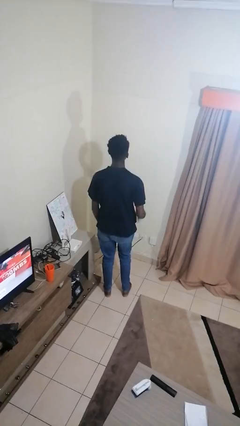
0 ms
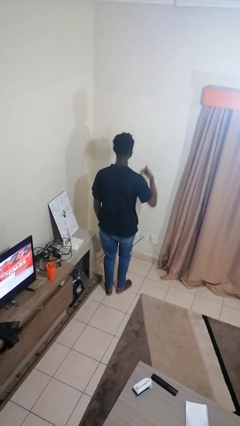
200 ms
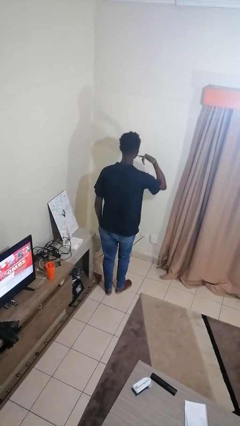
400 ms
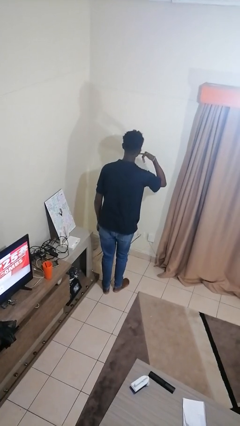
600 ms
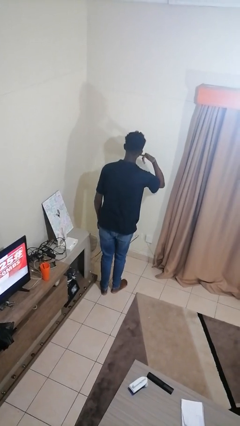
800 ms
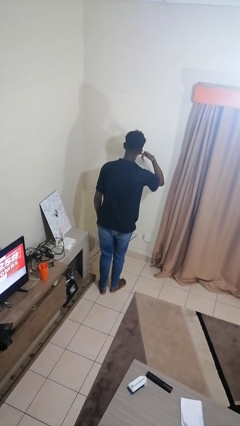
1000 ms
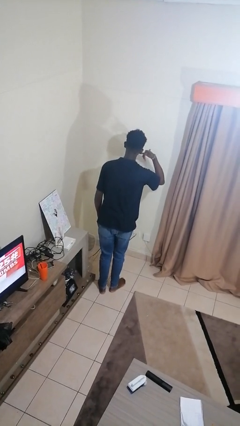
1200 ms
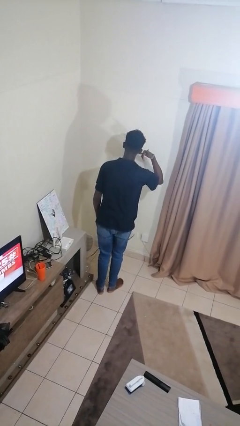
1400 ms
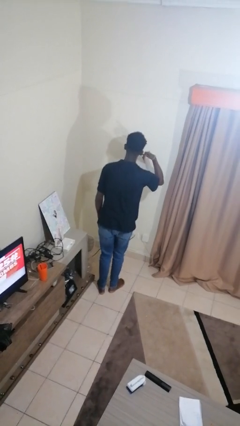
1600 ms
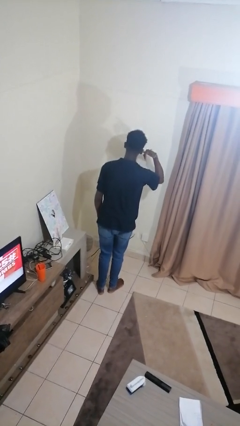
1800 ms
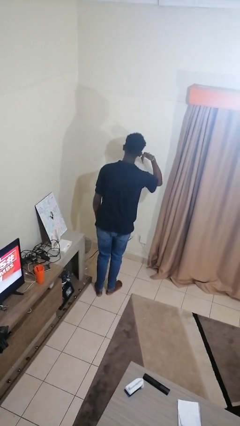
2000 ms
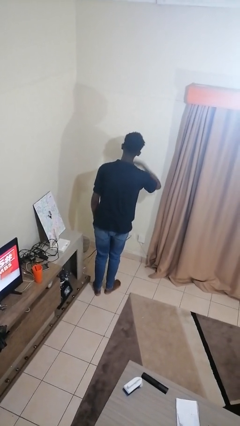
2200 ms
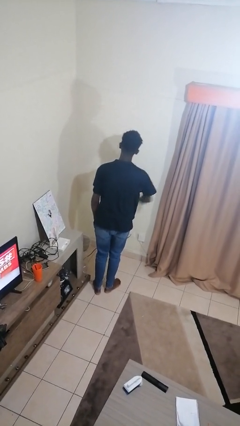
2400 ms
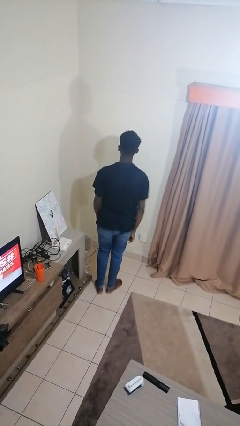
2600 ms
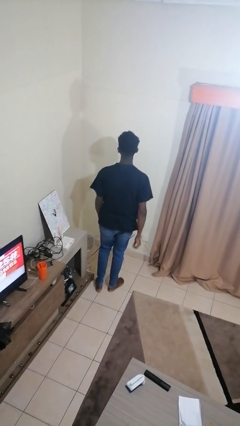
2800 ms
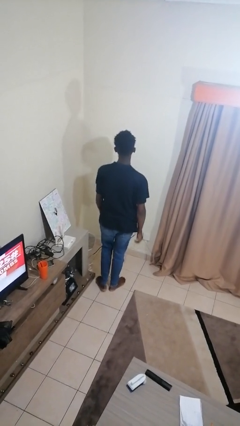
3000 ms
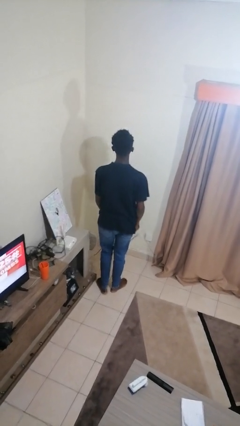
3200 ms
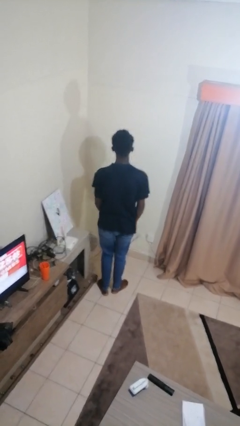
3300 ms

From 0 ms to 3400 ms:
person gestures call me

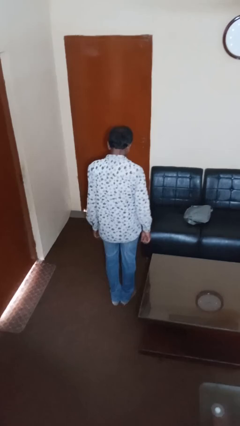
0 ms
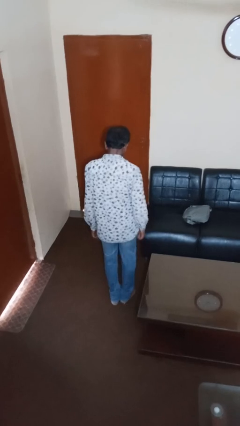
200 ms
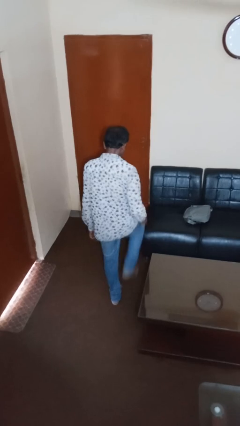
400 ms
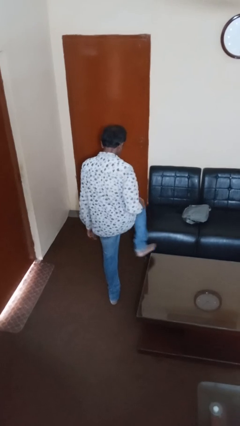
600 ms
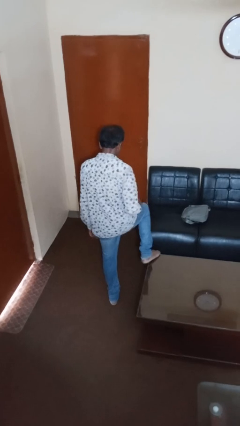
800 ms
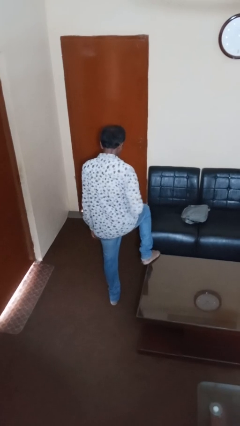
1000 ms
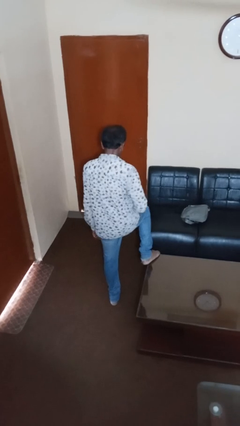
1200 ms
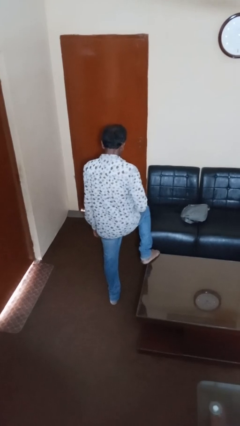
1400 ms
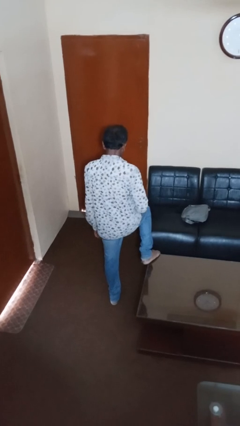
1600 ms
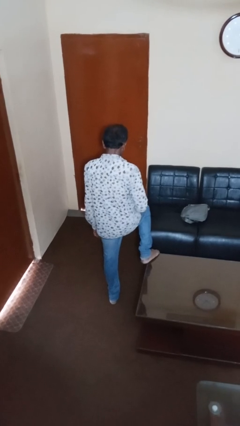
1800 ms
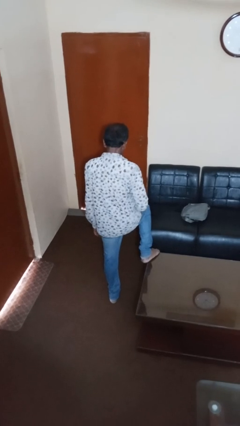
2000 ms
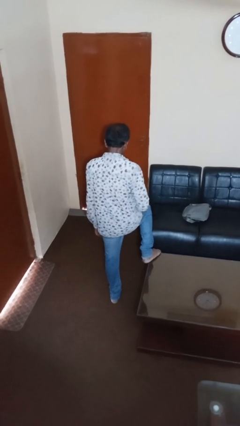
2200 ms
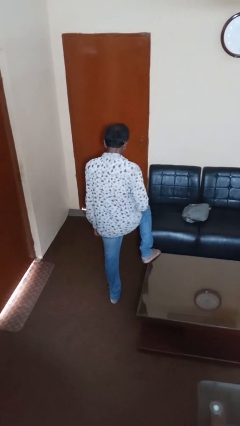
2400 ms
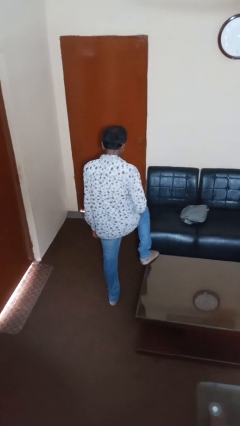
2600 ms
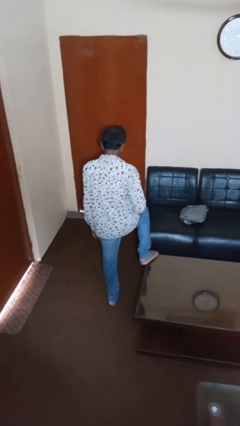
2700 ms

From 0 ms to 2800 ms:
person puts feet up

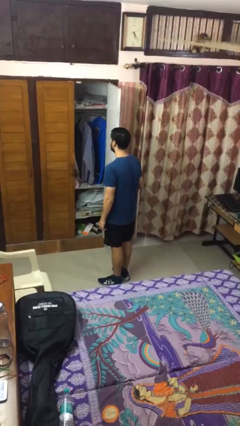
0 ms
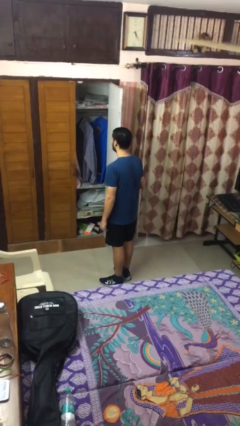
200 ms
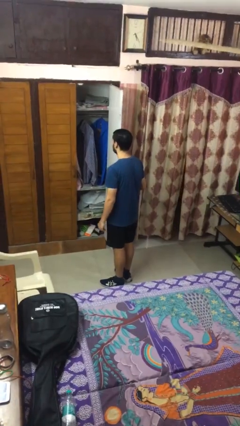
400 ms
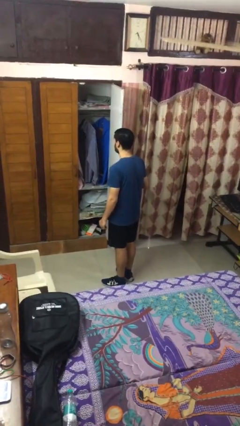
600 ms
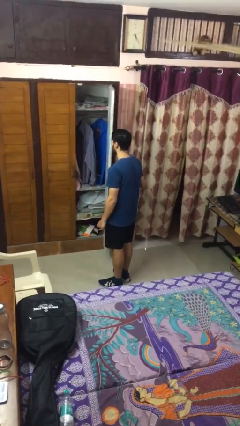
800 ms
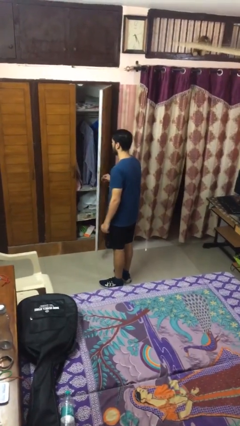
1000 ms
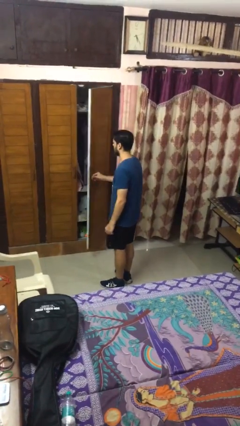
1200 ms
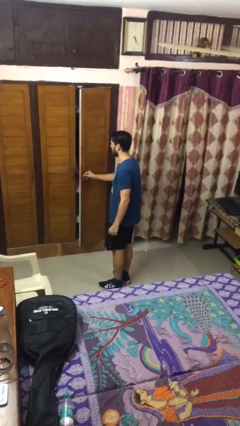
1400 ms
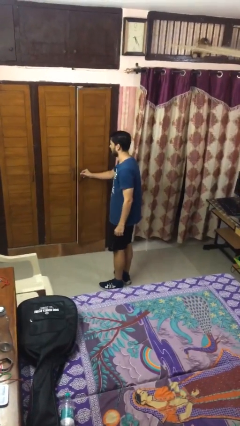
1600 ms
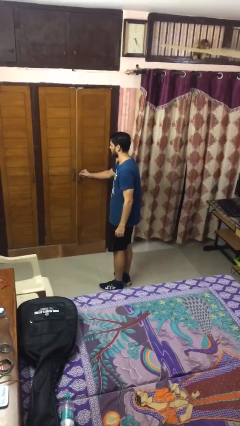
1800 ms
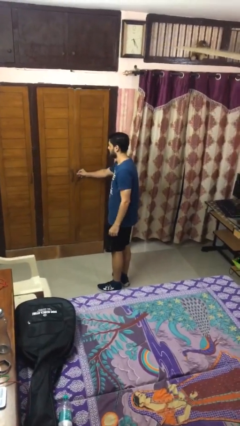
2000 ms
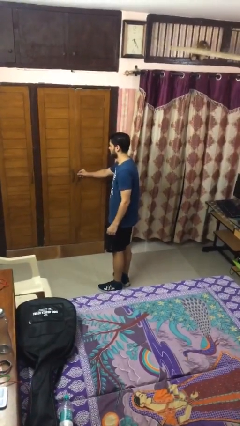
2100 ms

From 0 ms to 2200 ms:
person closes closet door

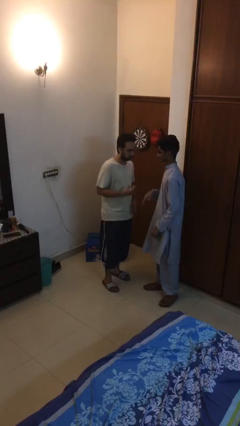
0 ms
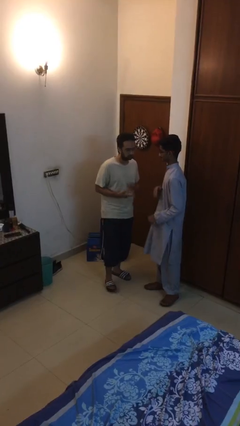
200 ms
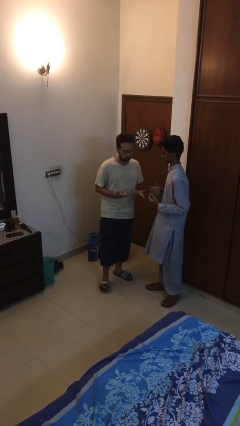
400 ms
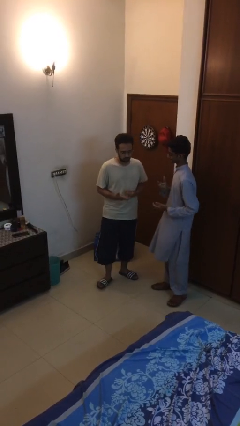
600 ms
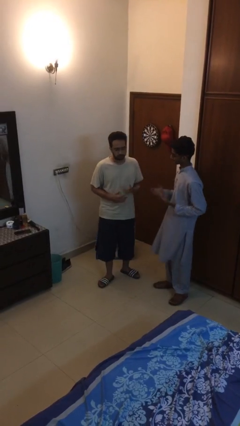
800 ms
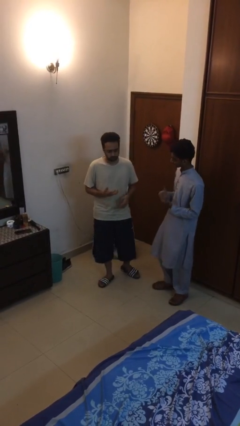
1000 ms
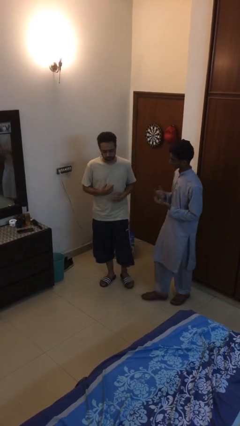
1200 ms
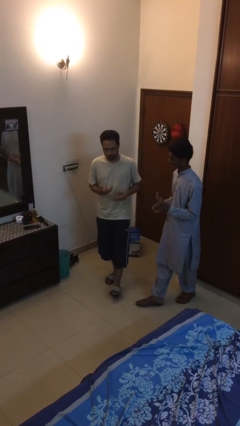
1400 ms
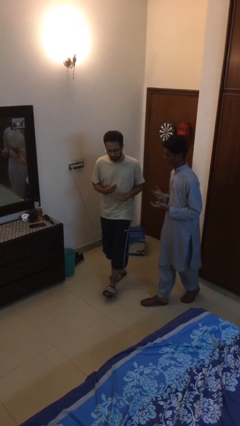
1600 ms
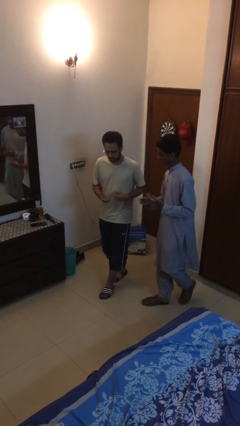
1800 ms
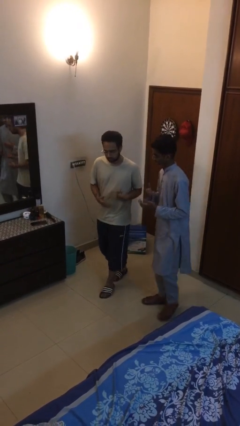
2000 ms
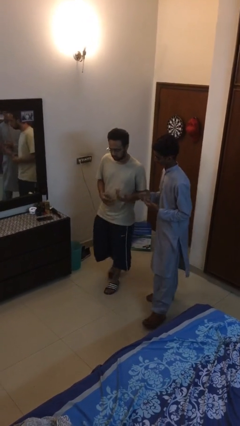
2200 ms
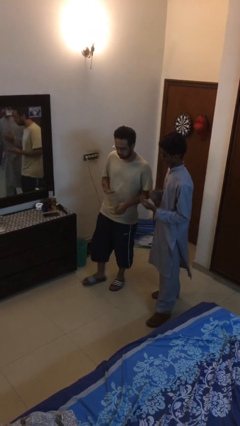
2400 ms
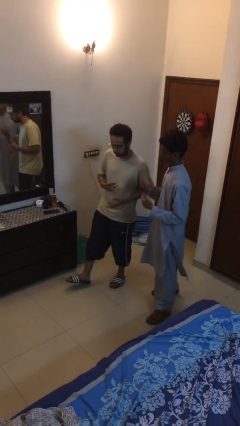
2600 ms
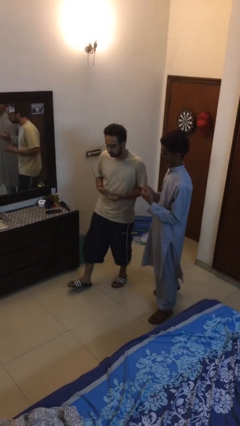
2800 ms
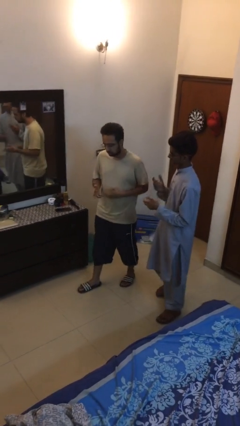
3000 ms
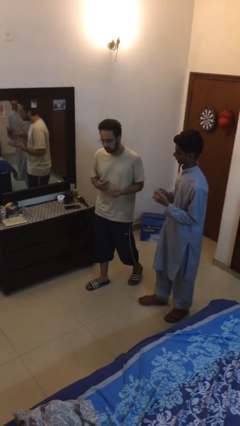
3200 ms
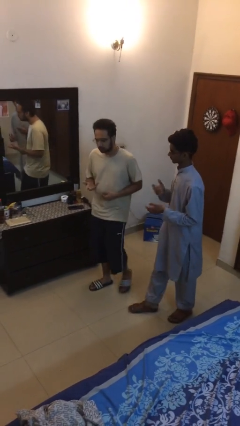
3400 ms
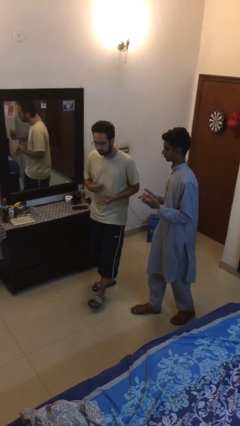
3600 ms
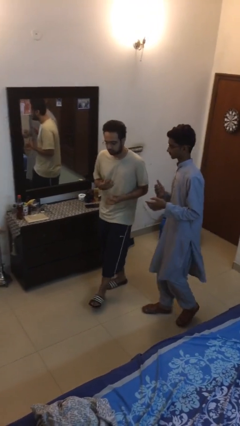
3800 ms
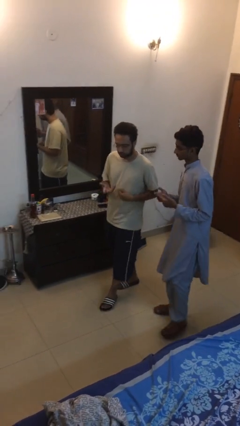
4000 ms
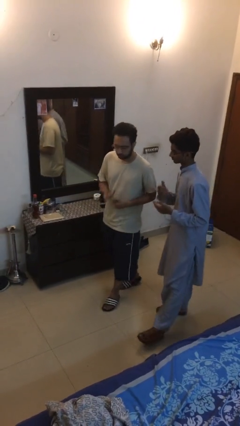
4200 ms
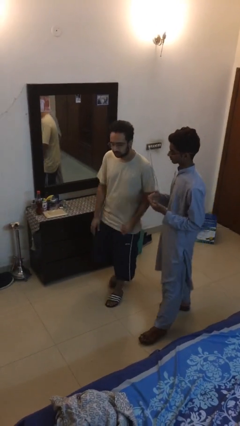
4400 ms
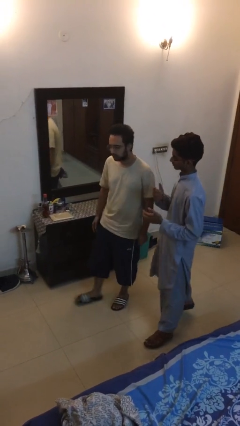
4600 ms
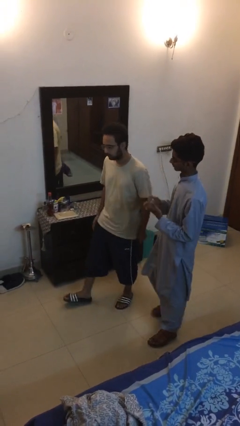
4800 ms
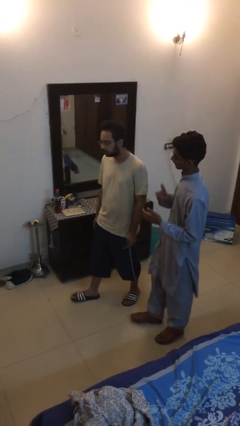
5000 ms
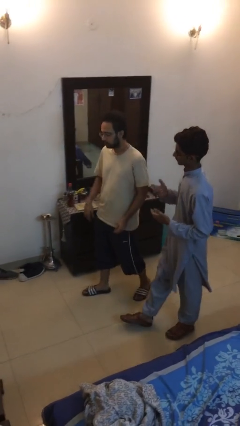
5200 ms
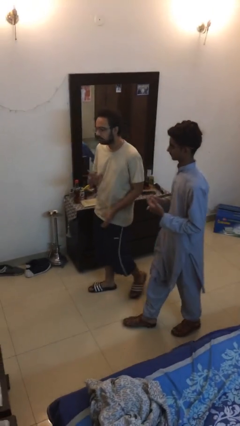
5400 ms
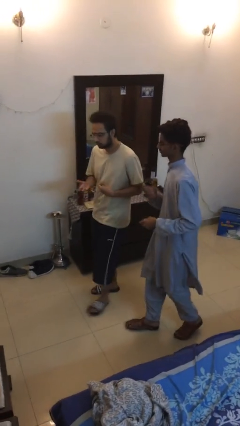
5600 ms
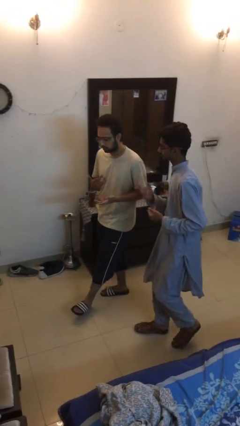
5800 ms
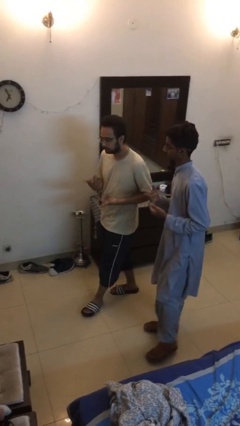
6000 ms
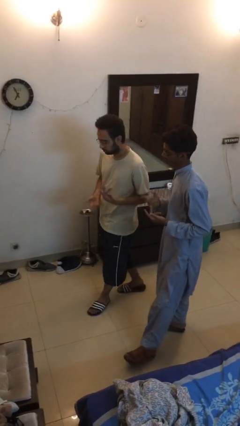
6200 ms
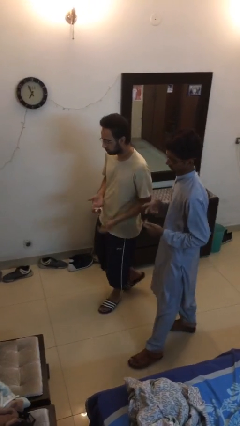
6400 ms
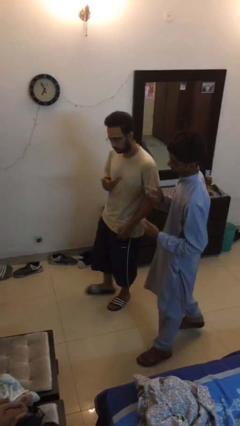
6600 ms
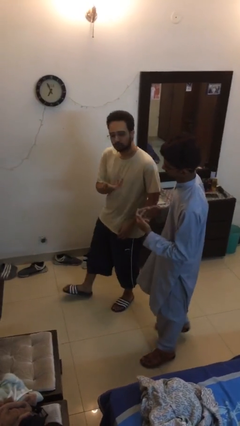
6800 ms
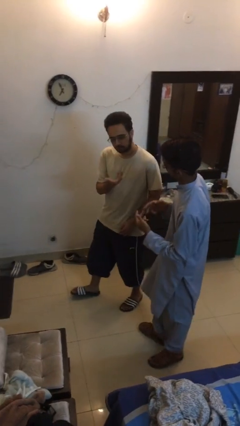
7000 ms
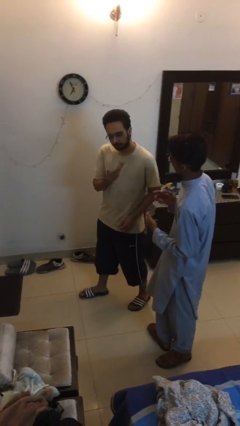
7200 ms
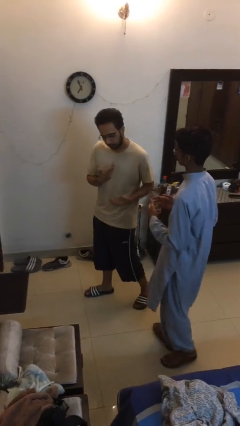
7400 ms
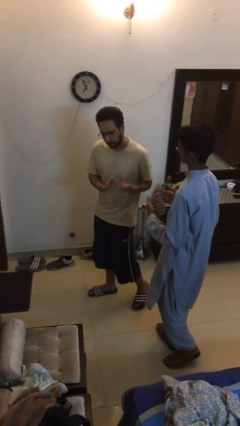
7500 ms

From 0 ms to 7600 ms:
person talks to person

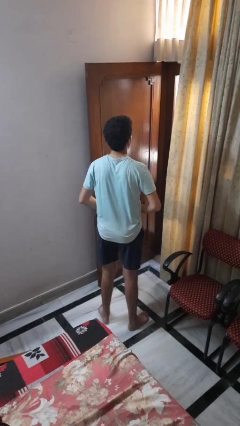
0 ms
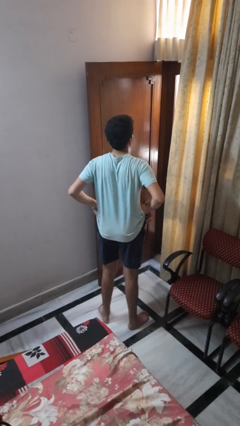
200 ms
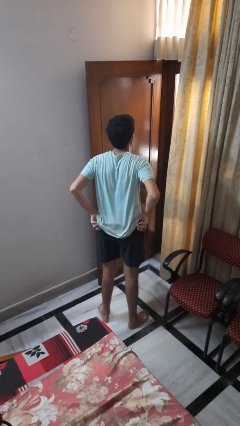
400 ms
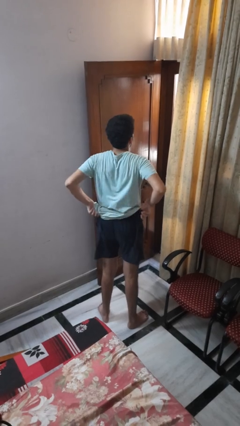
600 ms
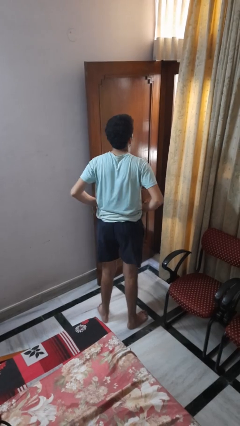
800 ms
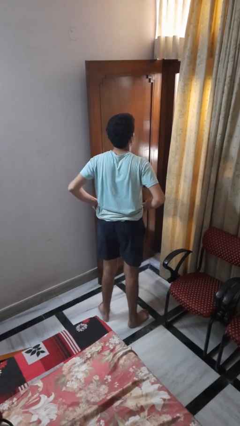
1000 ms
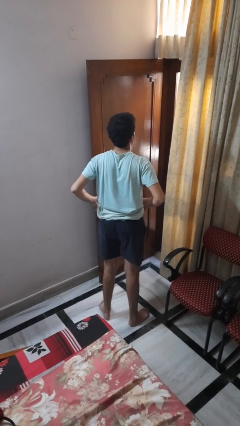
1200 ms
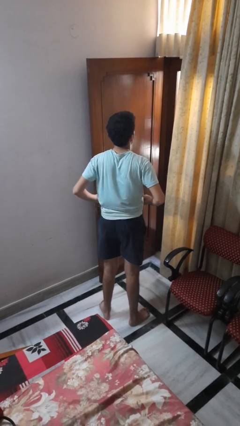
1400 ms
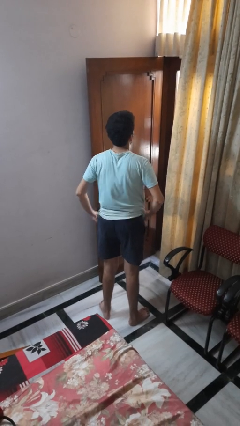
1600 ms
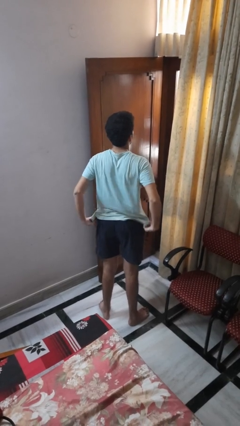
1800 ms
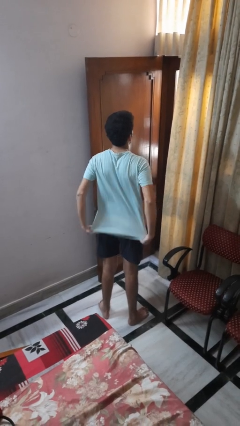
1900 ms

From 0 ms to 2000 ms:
person hikes up pants
